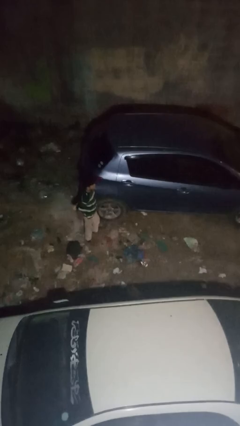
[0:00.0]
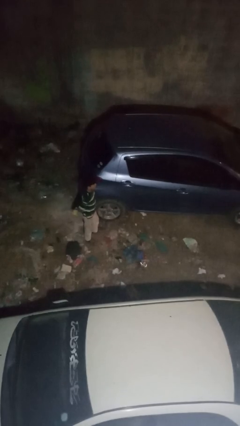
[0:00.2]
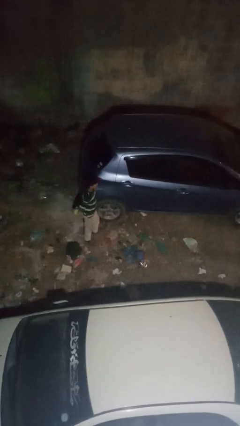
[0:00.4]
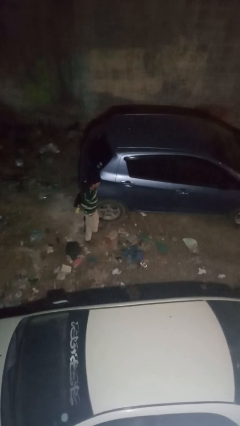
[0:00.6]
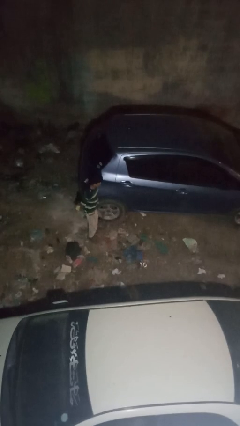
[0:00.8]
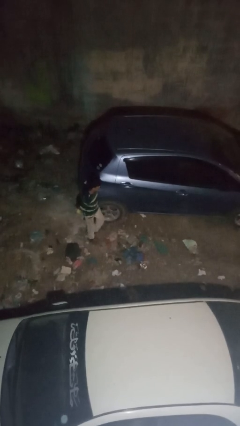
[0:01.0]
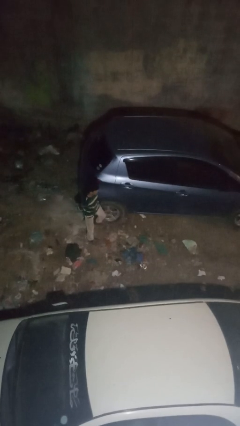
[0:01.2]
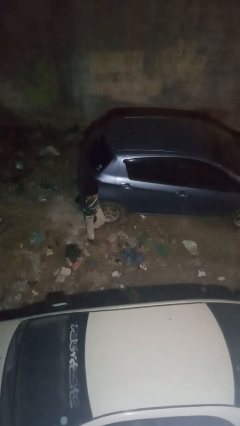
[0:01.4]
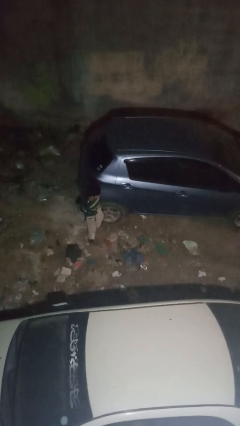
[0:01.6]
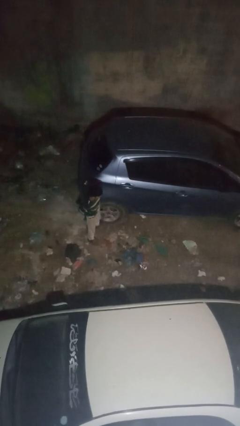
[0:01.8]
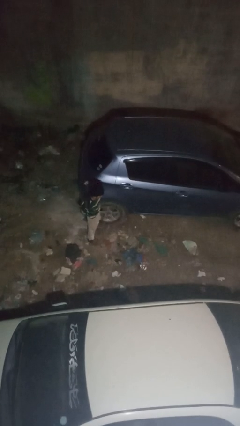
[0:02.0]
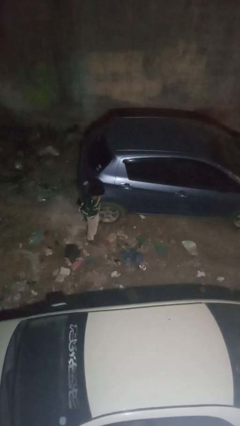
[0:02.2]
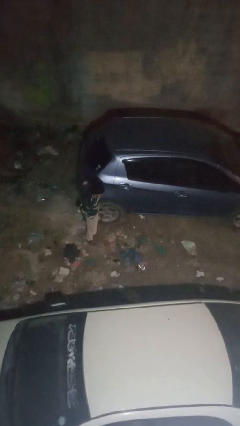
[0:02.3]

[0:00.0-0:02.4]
person kicks car tires

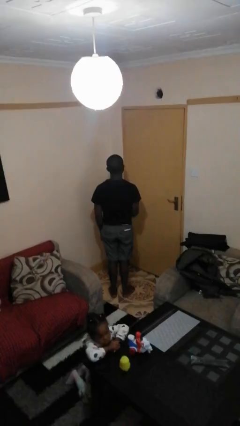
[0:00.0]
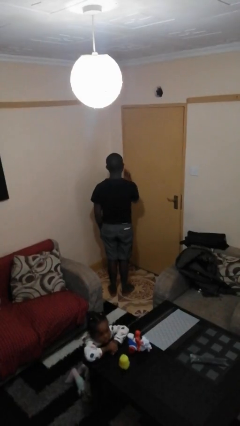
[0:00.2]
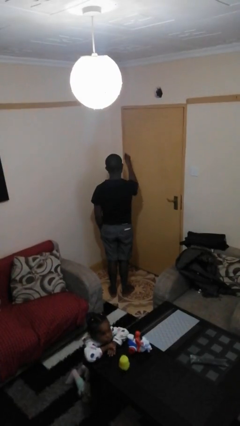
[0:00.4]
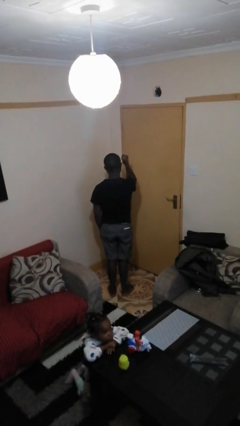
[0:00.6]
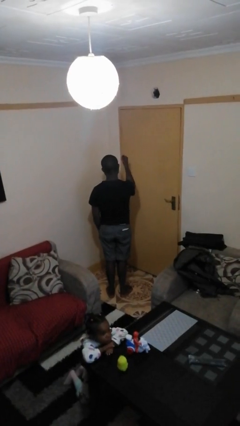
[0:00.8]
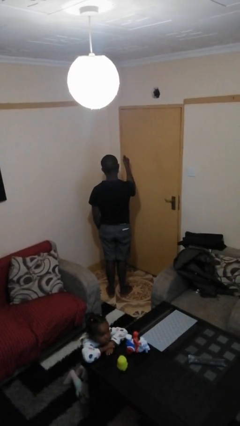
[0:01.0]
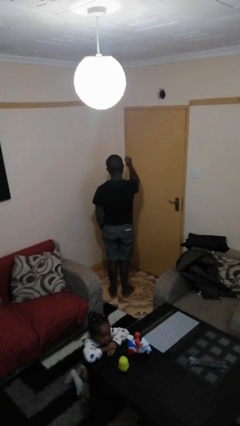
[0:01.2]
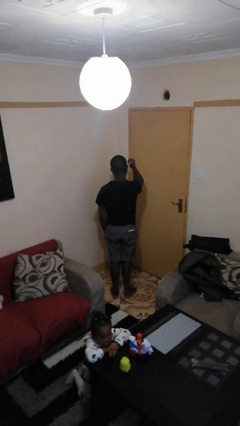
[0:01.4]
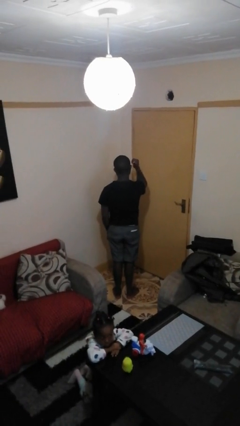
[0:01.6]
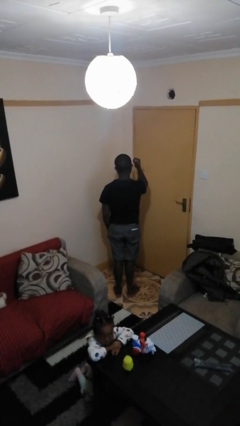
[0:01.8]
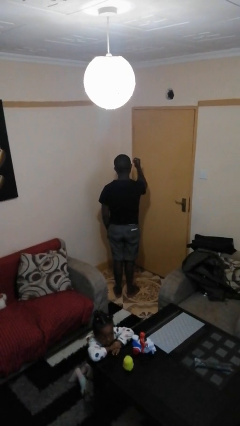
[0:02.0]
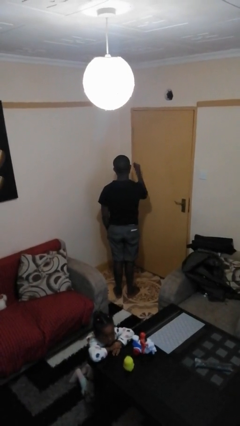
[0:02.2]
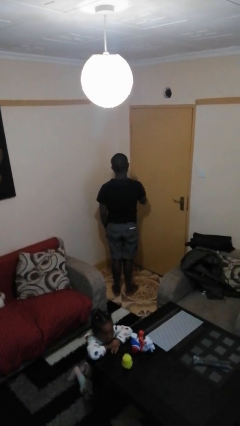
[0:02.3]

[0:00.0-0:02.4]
person gestures behind me

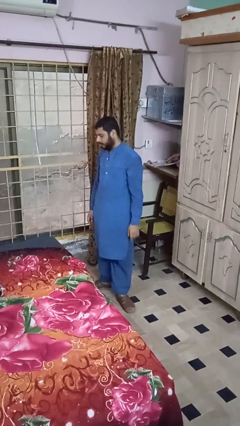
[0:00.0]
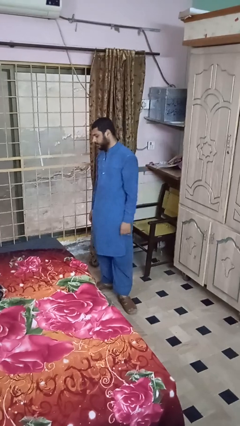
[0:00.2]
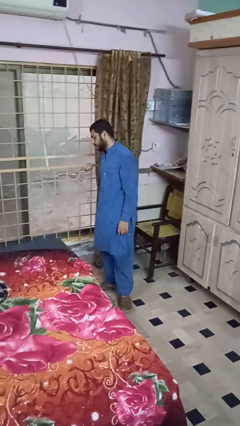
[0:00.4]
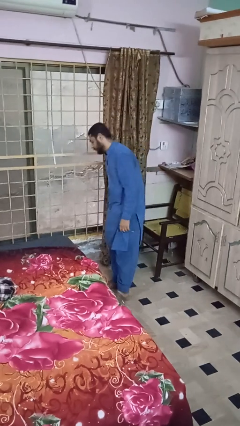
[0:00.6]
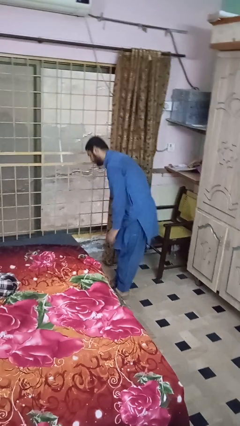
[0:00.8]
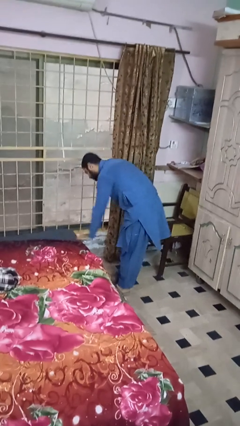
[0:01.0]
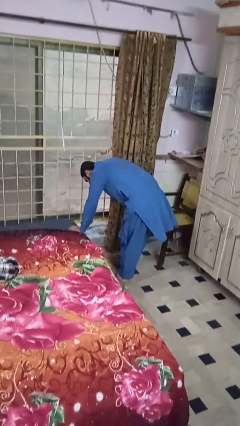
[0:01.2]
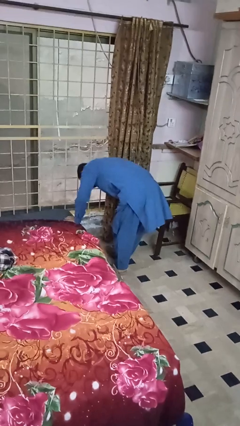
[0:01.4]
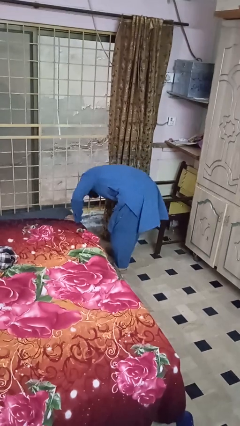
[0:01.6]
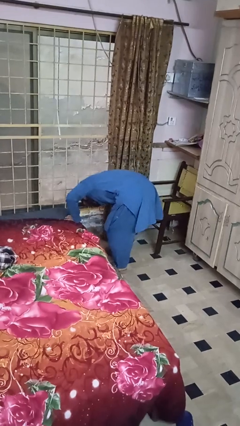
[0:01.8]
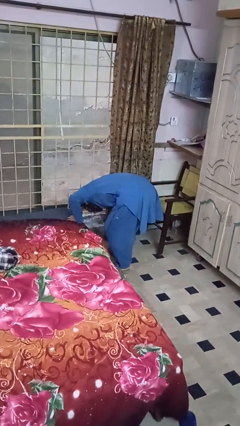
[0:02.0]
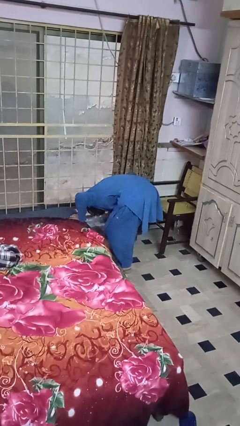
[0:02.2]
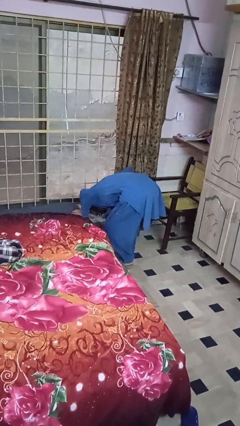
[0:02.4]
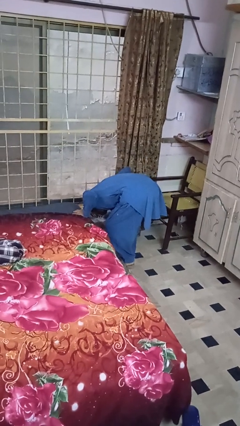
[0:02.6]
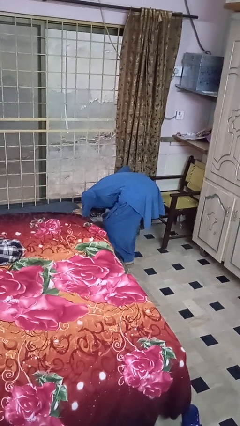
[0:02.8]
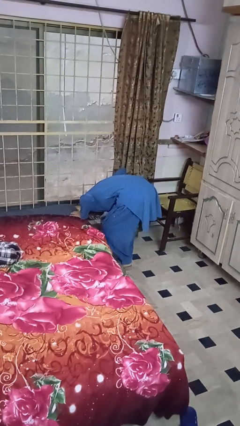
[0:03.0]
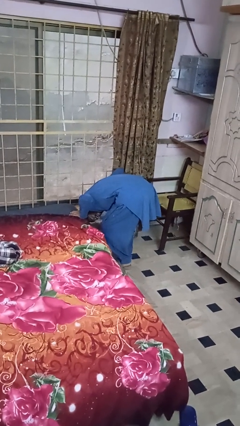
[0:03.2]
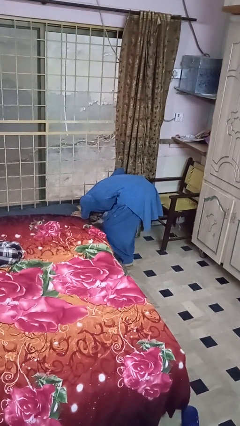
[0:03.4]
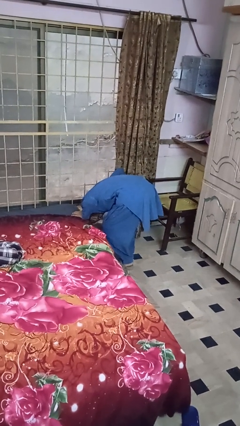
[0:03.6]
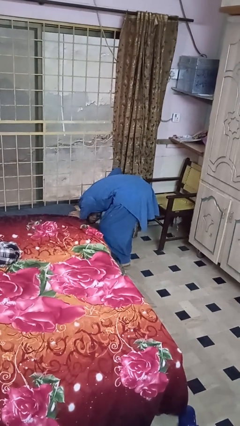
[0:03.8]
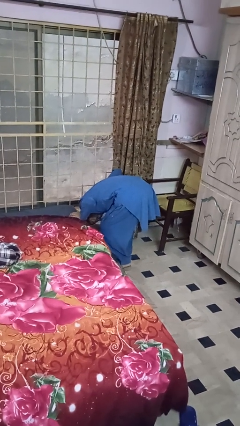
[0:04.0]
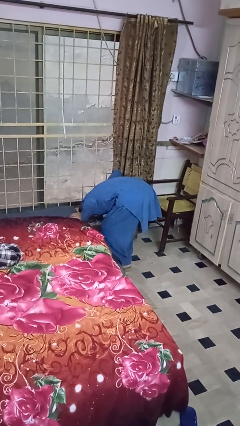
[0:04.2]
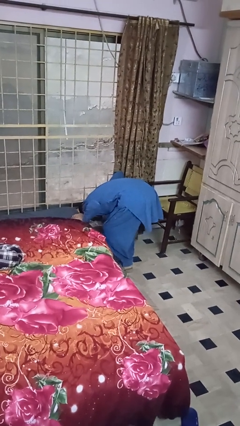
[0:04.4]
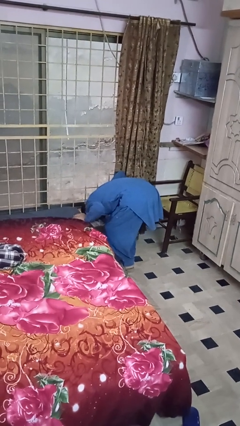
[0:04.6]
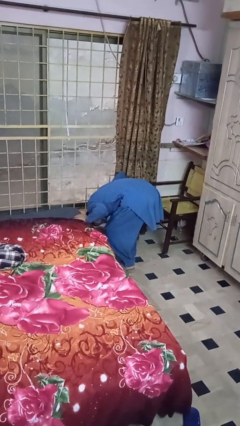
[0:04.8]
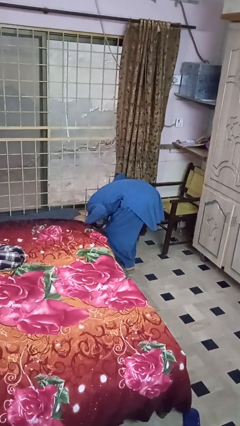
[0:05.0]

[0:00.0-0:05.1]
person searches under bed

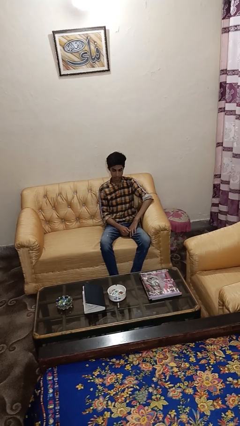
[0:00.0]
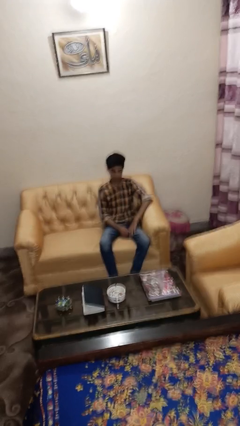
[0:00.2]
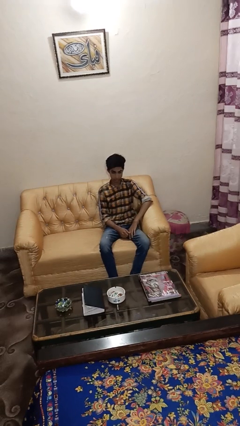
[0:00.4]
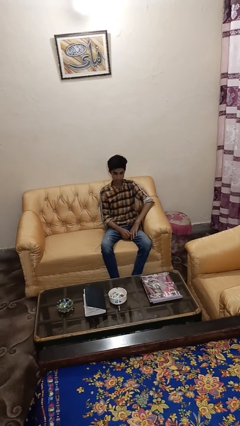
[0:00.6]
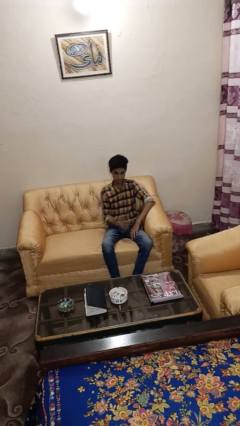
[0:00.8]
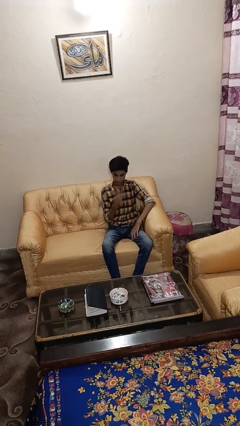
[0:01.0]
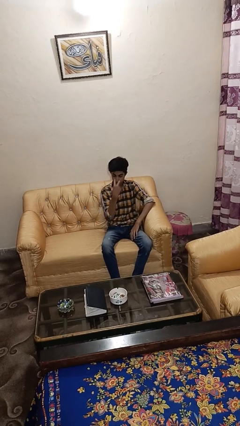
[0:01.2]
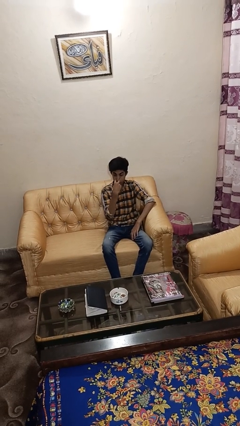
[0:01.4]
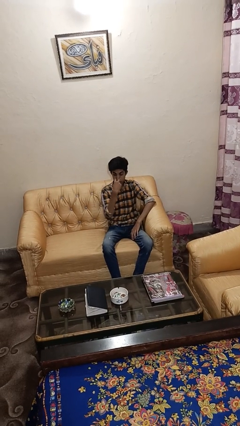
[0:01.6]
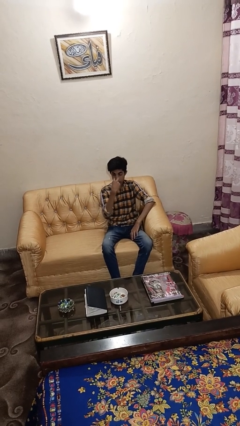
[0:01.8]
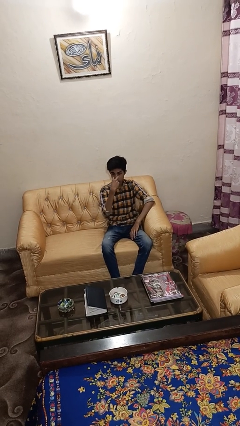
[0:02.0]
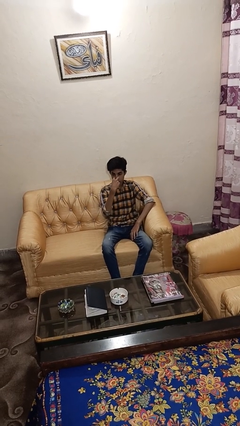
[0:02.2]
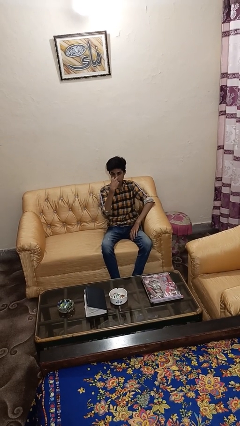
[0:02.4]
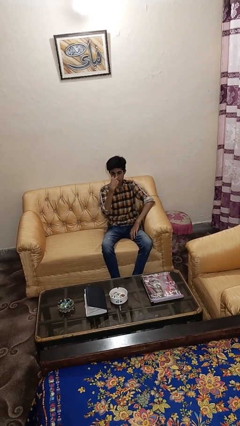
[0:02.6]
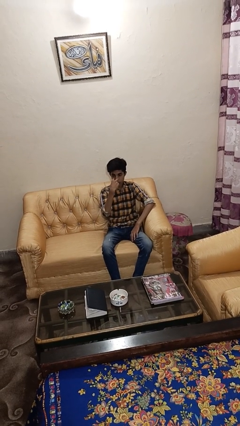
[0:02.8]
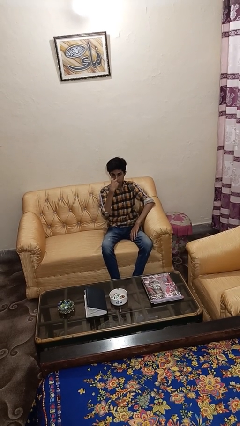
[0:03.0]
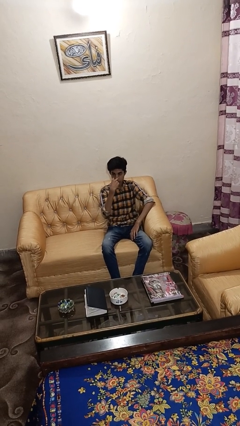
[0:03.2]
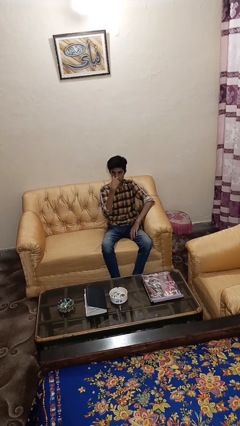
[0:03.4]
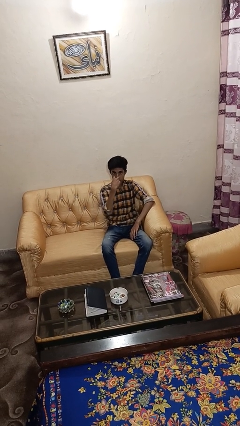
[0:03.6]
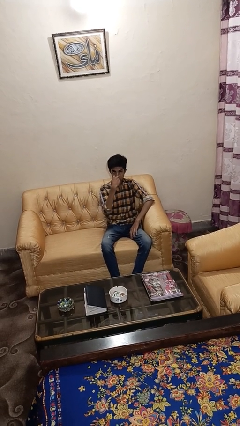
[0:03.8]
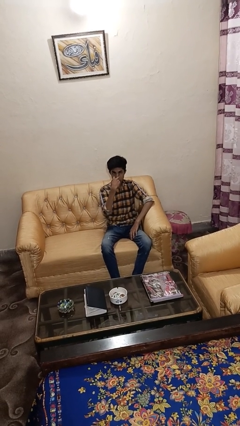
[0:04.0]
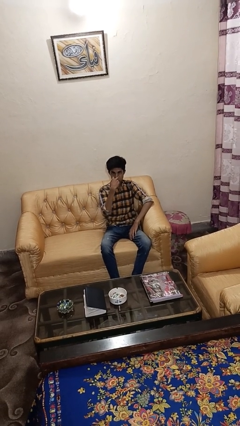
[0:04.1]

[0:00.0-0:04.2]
person gestures watch closely

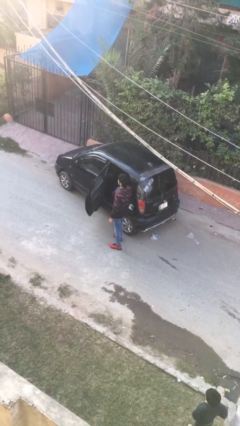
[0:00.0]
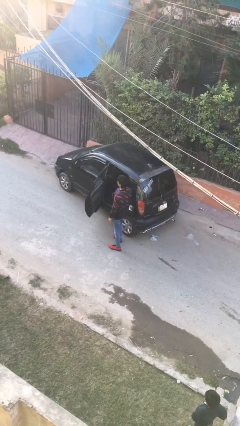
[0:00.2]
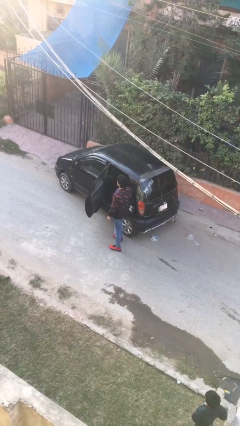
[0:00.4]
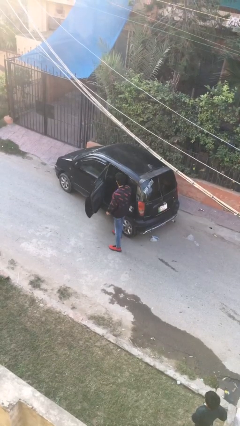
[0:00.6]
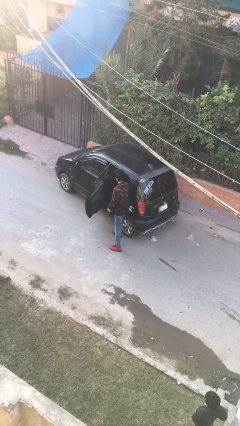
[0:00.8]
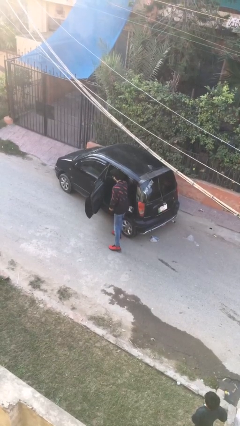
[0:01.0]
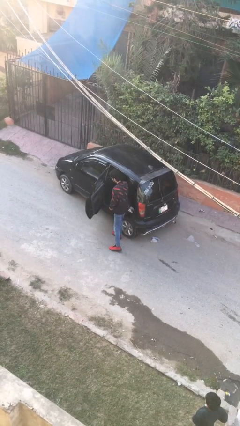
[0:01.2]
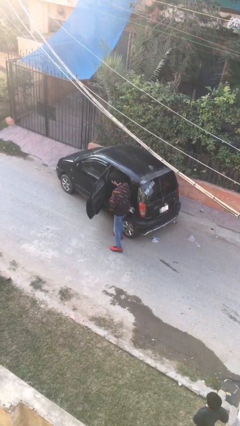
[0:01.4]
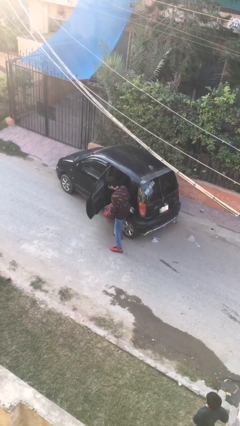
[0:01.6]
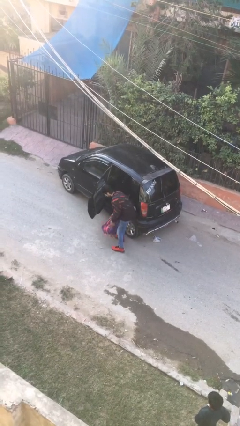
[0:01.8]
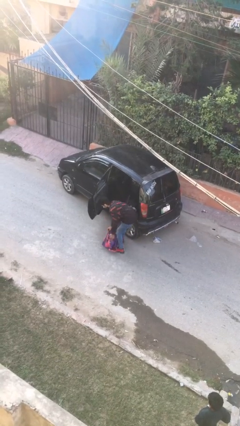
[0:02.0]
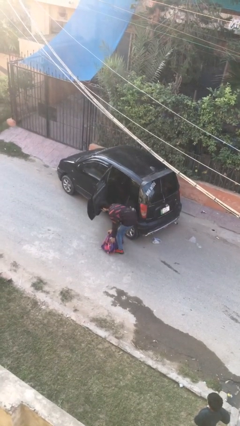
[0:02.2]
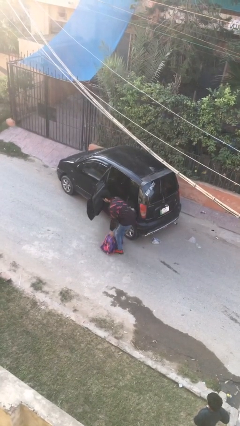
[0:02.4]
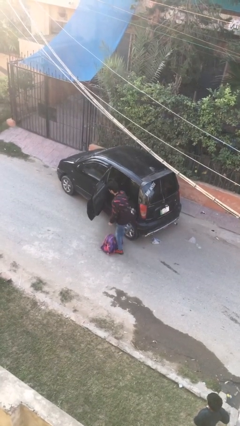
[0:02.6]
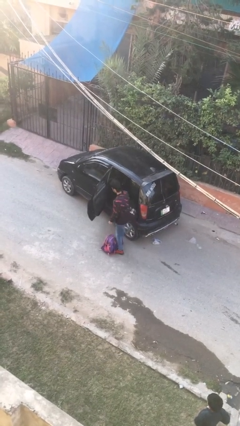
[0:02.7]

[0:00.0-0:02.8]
person unloads car

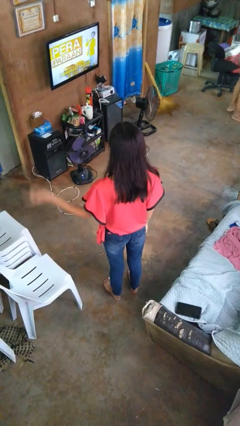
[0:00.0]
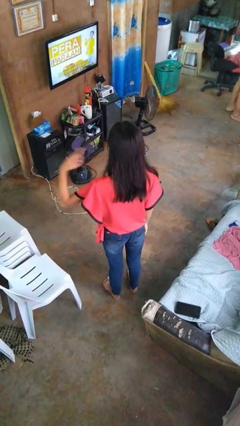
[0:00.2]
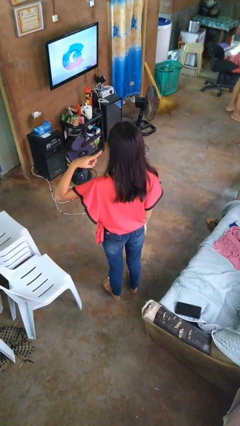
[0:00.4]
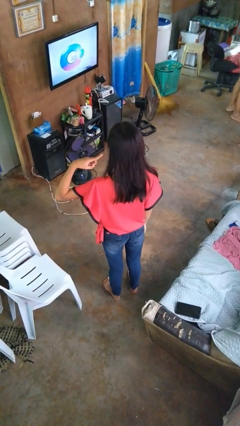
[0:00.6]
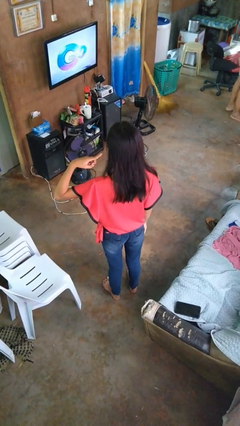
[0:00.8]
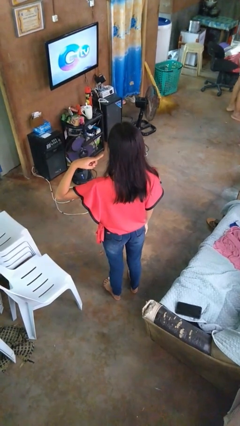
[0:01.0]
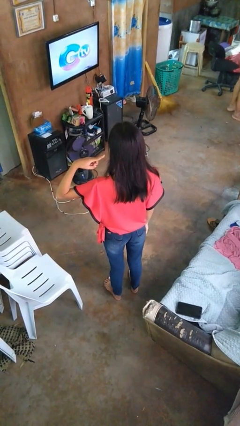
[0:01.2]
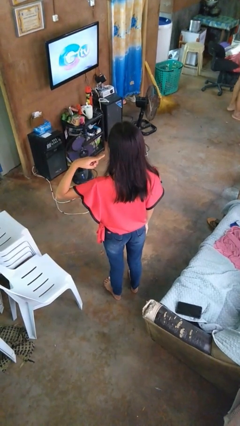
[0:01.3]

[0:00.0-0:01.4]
person gestures listen closely
